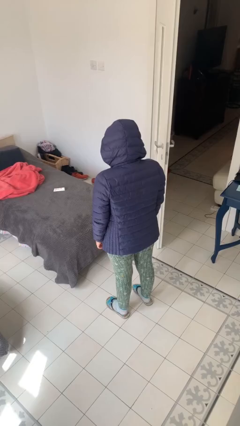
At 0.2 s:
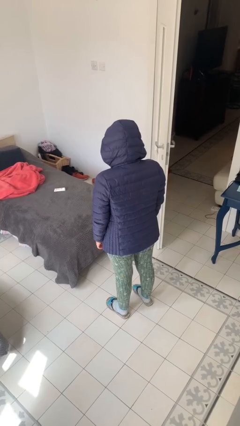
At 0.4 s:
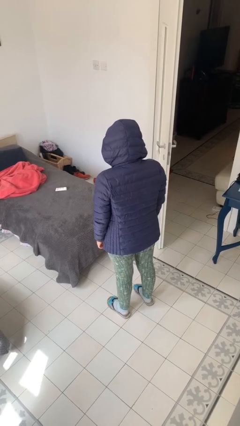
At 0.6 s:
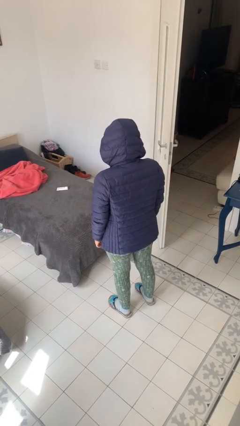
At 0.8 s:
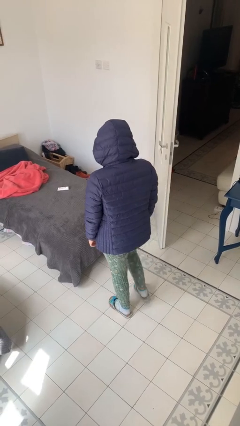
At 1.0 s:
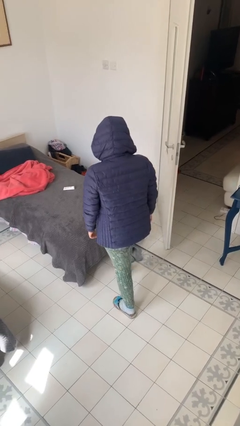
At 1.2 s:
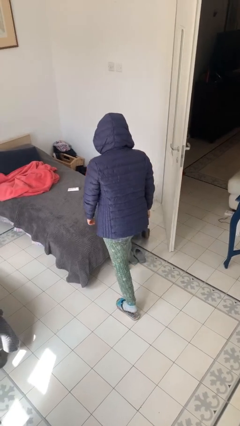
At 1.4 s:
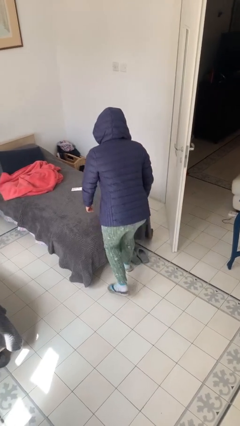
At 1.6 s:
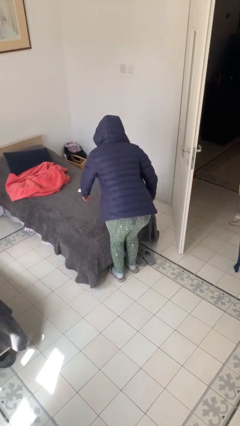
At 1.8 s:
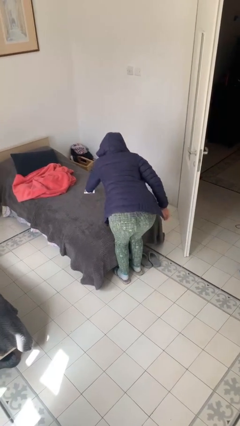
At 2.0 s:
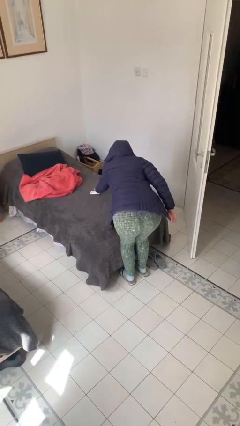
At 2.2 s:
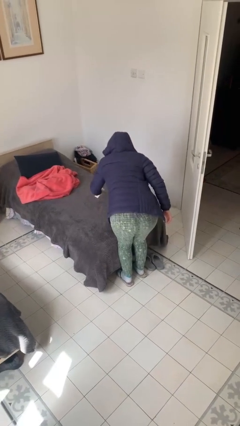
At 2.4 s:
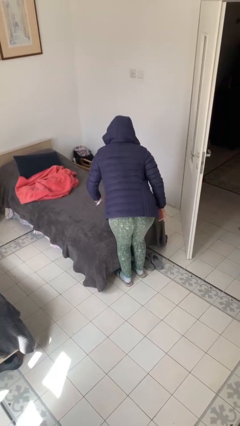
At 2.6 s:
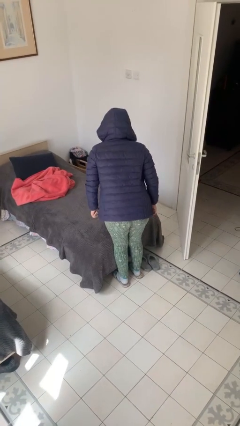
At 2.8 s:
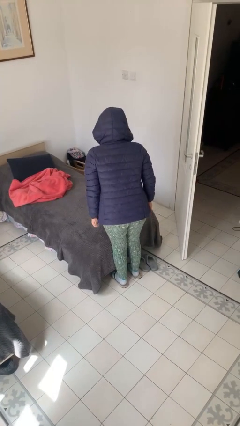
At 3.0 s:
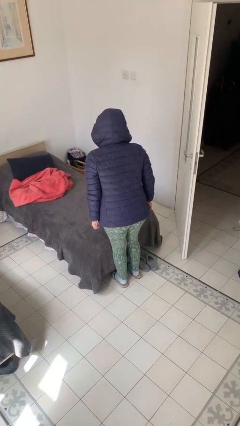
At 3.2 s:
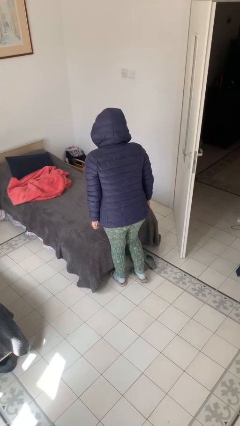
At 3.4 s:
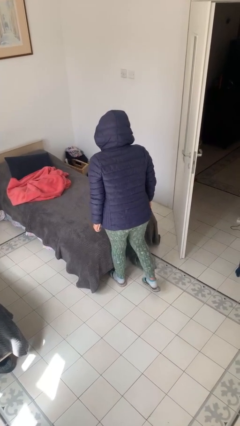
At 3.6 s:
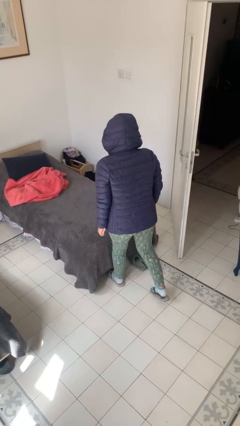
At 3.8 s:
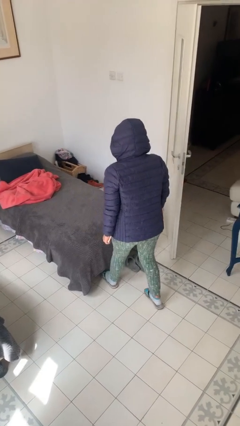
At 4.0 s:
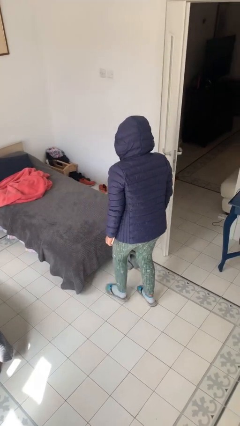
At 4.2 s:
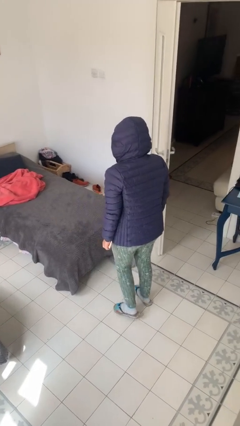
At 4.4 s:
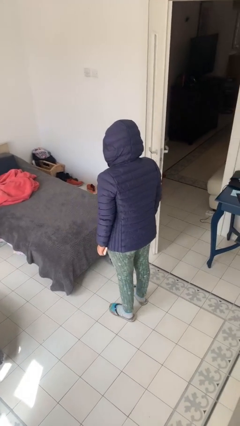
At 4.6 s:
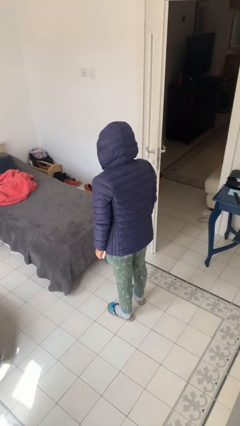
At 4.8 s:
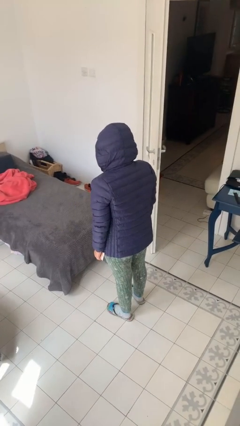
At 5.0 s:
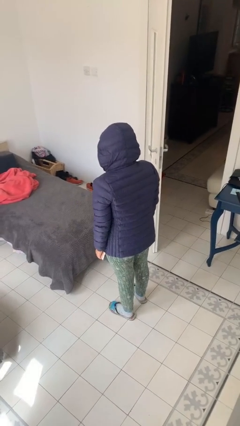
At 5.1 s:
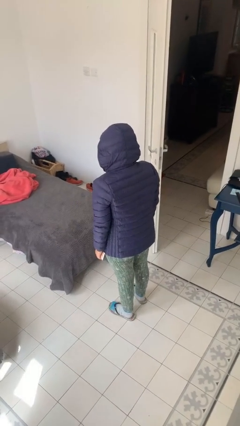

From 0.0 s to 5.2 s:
person picks up object from bed

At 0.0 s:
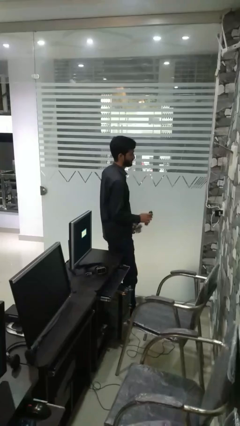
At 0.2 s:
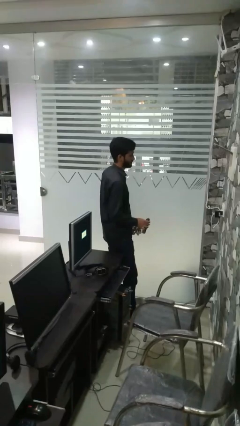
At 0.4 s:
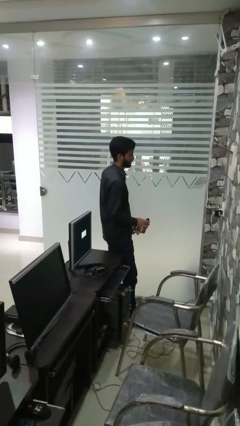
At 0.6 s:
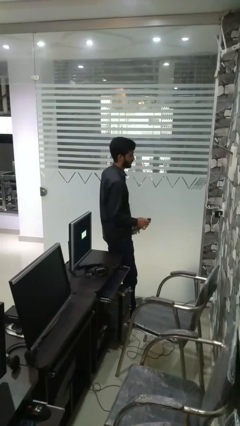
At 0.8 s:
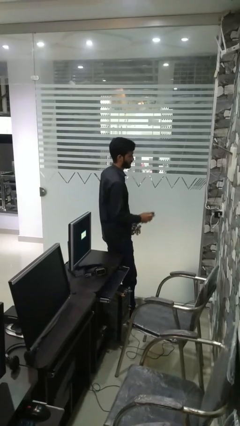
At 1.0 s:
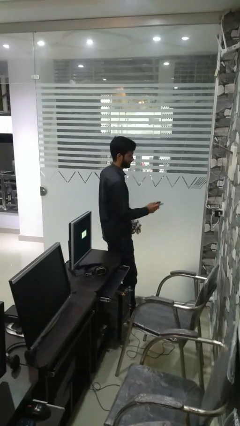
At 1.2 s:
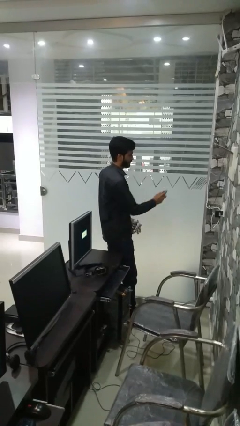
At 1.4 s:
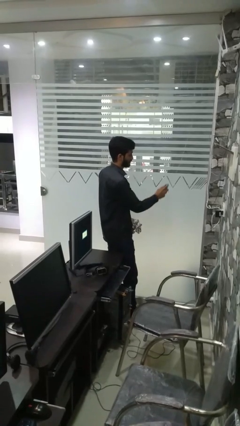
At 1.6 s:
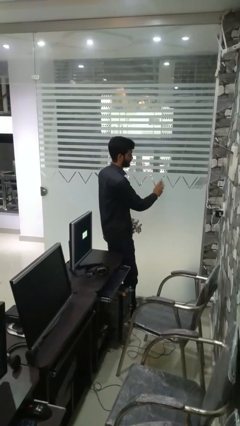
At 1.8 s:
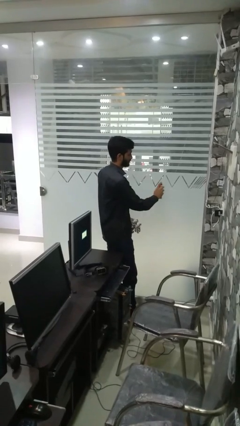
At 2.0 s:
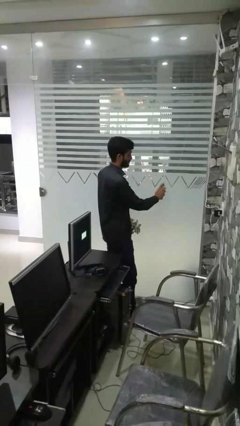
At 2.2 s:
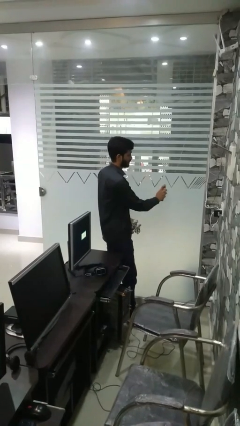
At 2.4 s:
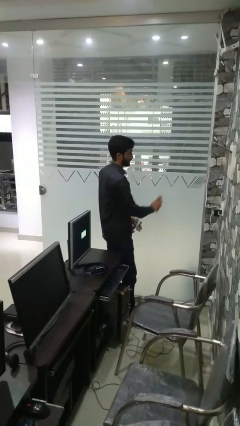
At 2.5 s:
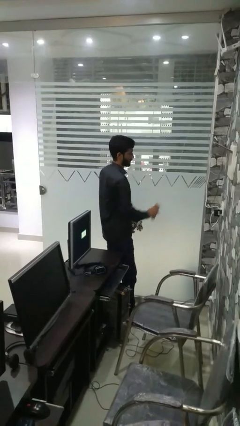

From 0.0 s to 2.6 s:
person sprays from bottle

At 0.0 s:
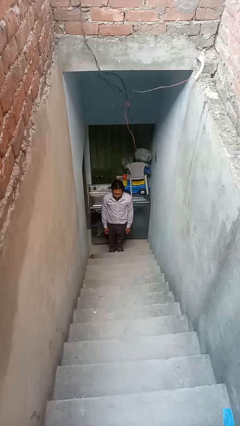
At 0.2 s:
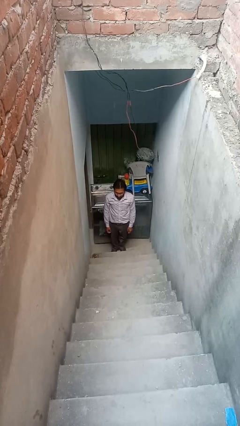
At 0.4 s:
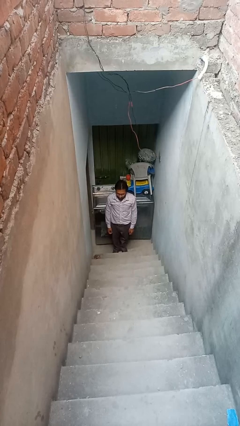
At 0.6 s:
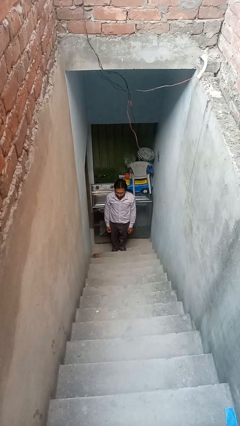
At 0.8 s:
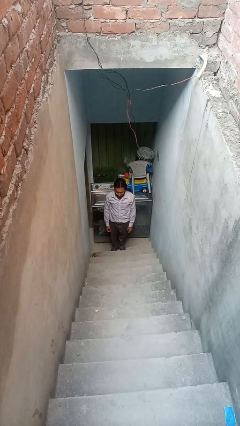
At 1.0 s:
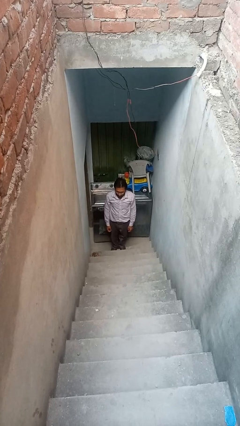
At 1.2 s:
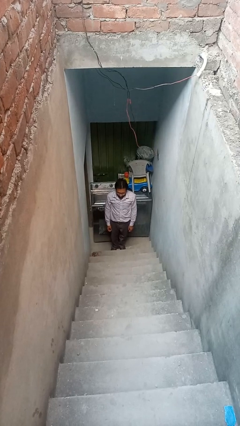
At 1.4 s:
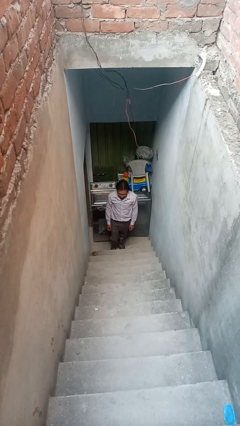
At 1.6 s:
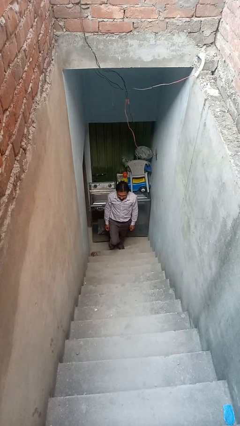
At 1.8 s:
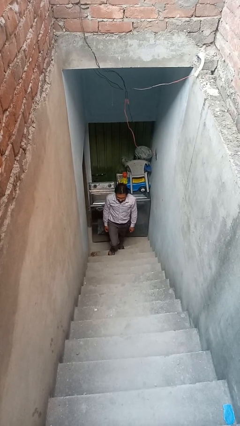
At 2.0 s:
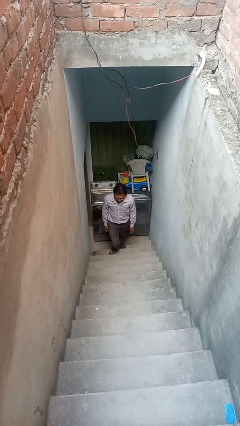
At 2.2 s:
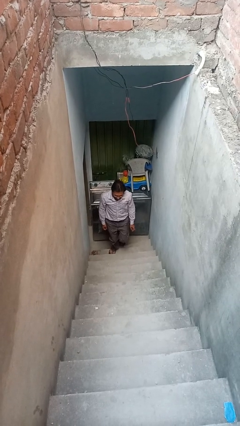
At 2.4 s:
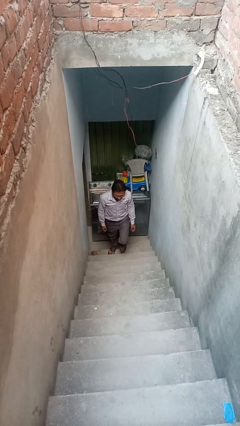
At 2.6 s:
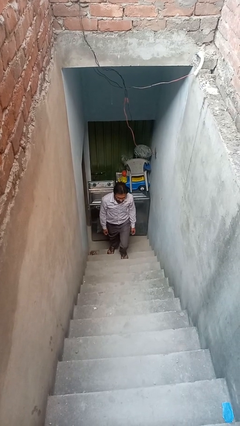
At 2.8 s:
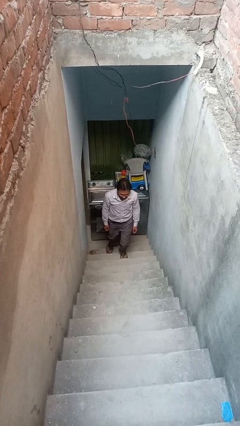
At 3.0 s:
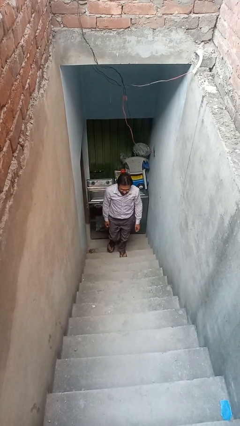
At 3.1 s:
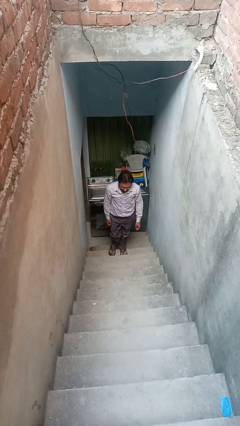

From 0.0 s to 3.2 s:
person climbs up stairs

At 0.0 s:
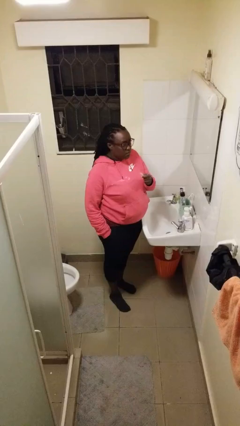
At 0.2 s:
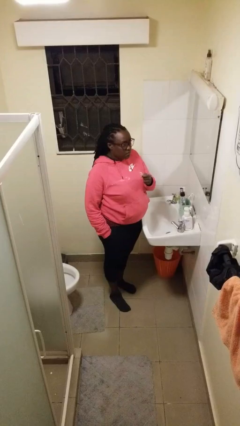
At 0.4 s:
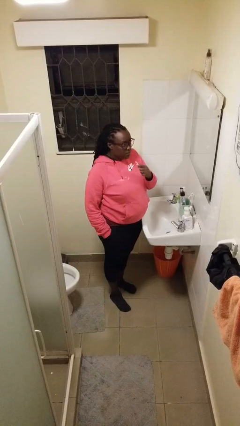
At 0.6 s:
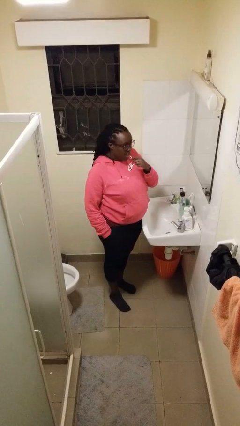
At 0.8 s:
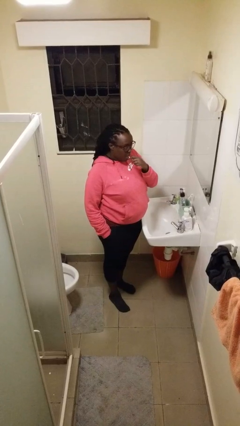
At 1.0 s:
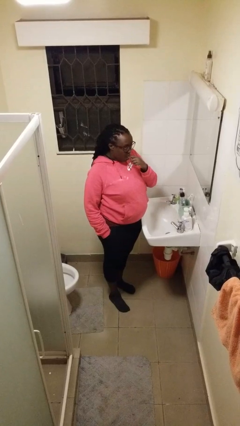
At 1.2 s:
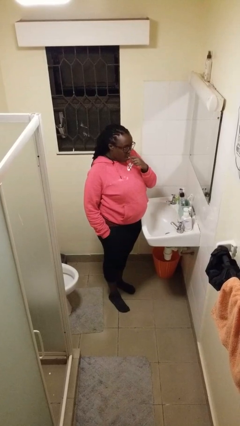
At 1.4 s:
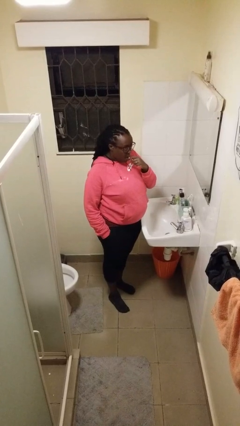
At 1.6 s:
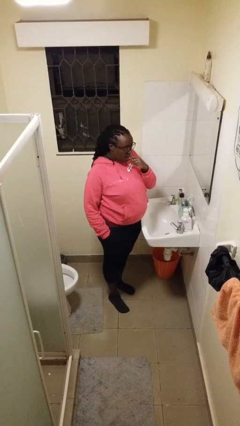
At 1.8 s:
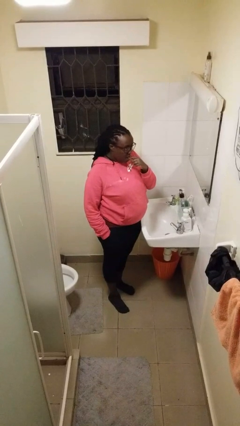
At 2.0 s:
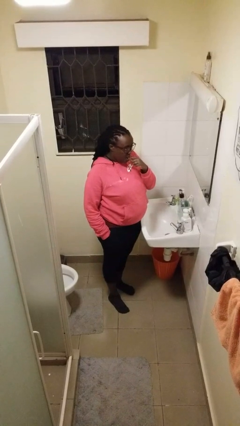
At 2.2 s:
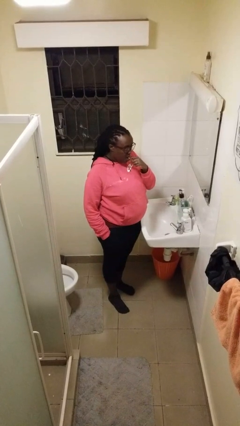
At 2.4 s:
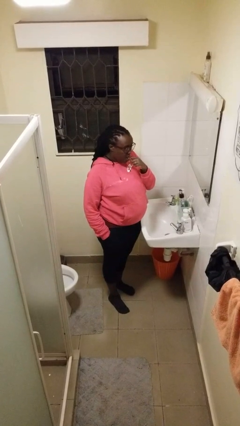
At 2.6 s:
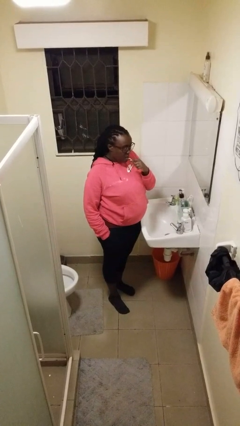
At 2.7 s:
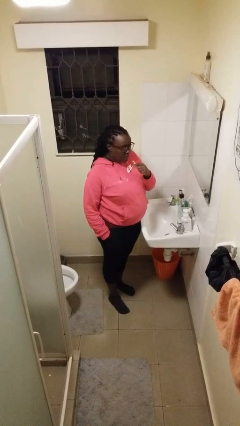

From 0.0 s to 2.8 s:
person flosses

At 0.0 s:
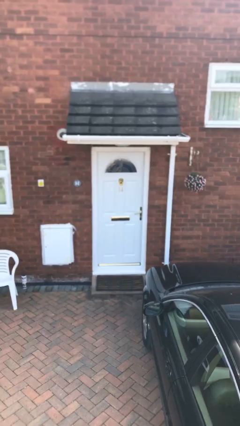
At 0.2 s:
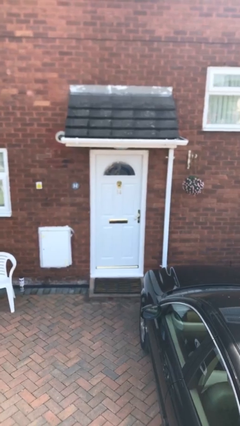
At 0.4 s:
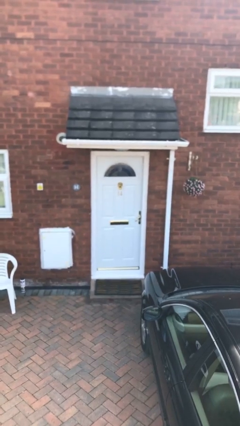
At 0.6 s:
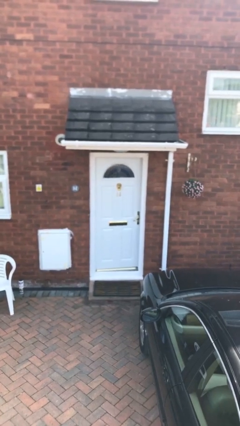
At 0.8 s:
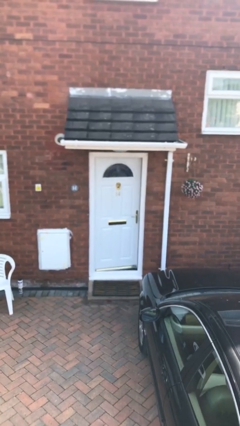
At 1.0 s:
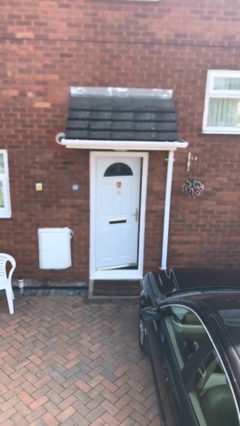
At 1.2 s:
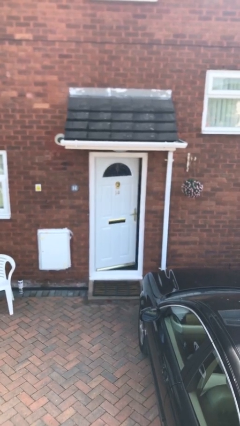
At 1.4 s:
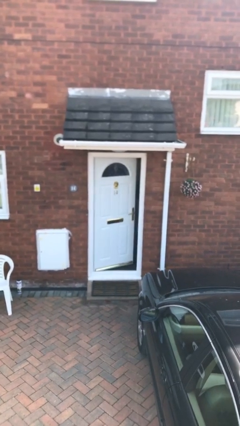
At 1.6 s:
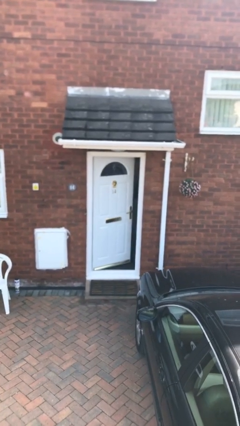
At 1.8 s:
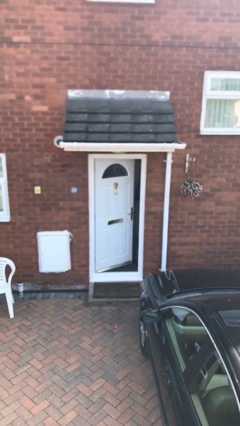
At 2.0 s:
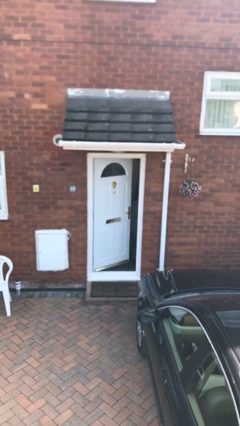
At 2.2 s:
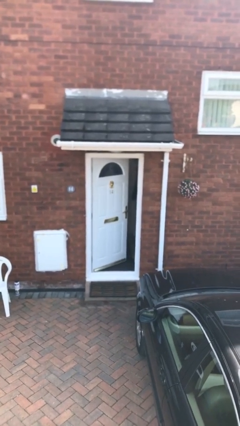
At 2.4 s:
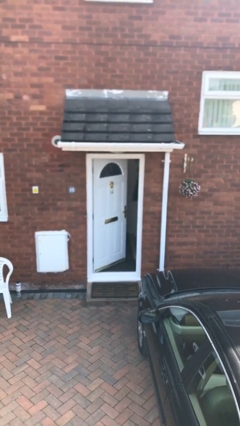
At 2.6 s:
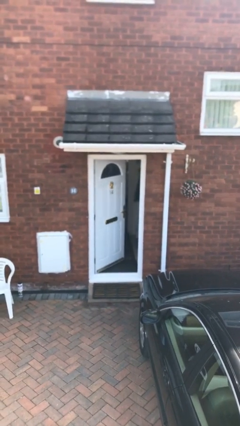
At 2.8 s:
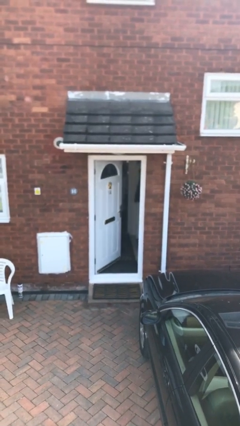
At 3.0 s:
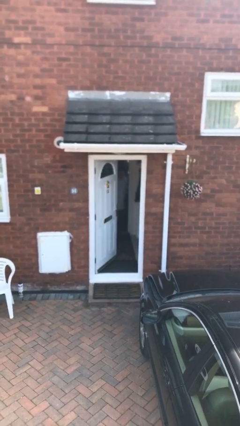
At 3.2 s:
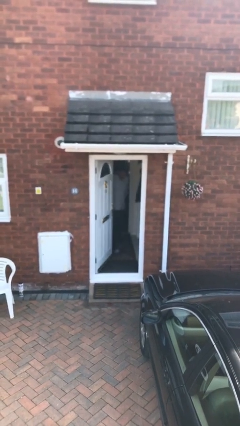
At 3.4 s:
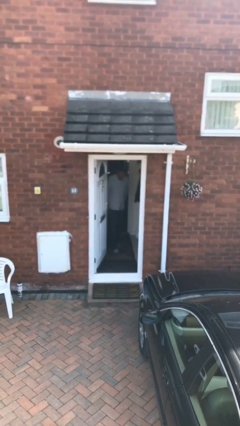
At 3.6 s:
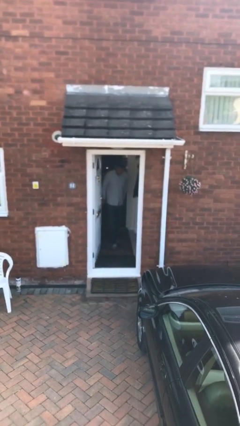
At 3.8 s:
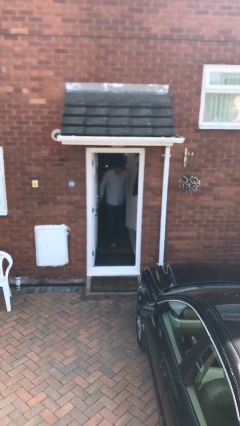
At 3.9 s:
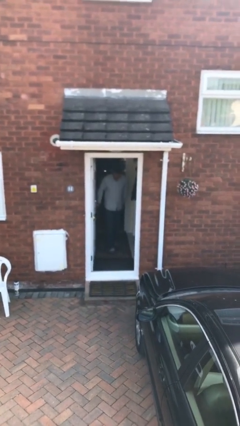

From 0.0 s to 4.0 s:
person opens facility door
